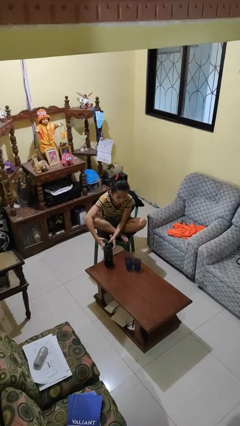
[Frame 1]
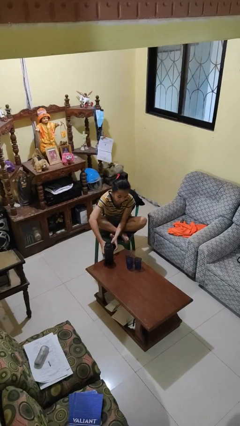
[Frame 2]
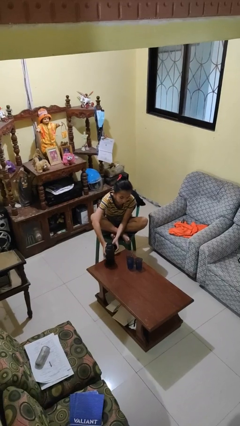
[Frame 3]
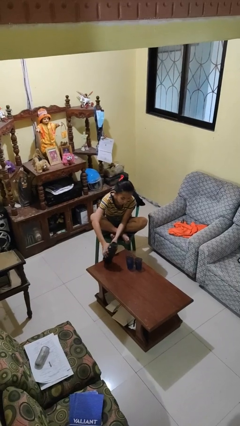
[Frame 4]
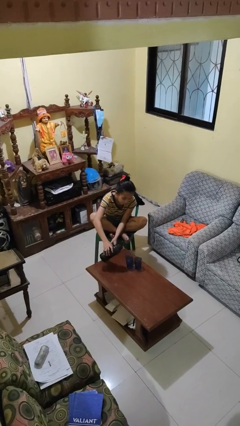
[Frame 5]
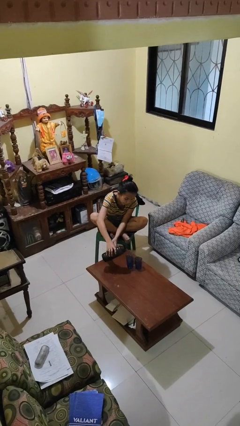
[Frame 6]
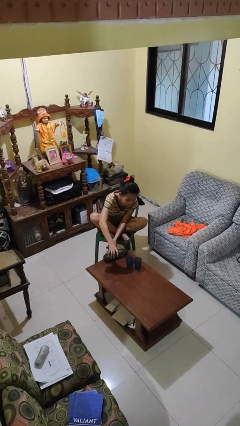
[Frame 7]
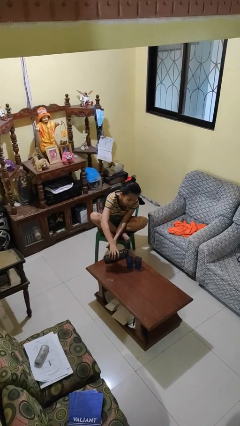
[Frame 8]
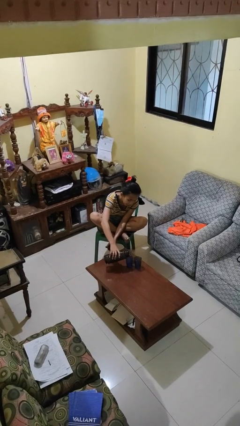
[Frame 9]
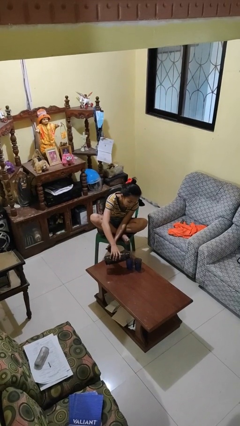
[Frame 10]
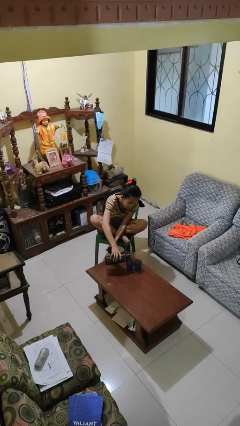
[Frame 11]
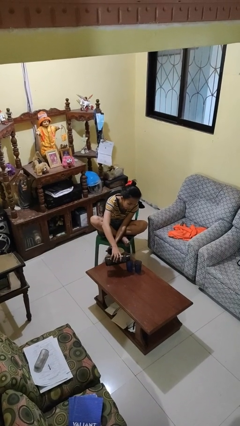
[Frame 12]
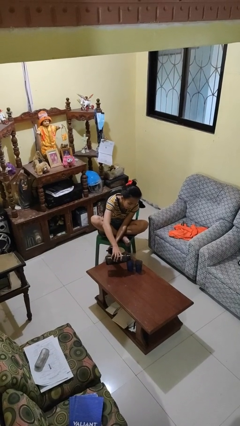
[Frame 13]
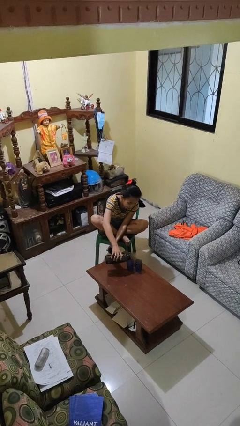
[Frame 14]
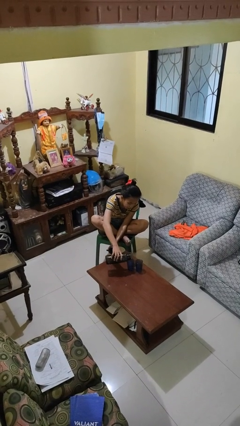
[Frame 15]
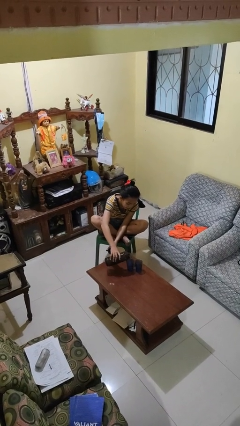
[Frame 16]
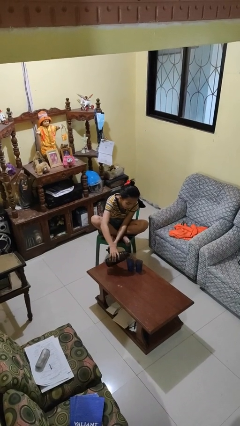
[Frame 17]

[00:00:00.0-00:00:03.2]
person pours liquid into cup

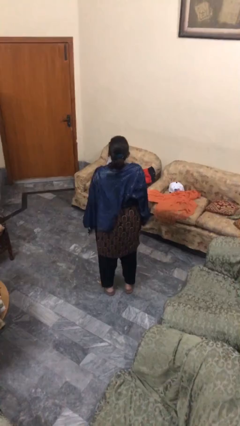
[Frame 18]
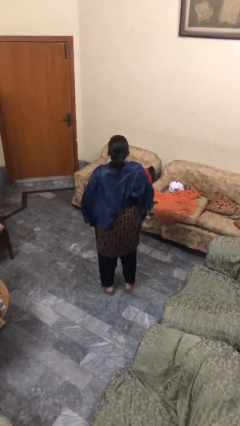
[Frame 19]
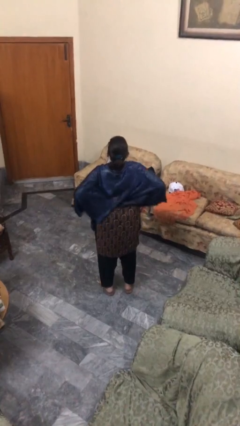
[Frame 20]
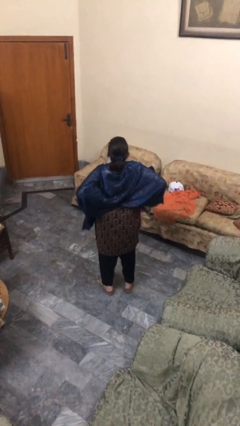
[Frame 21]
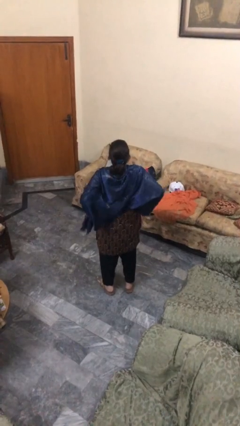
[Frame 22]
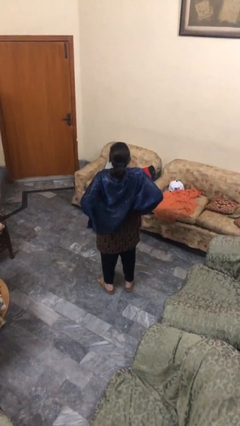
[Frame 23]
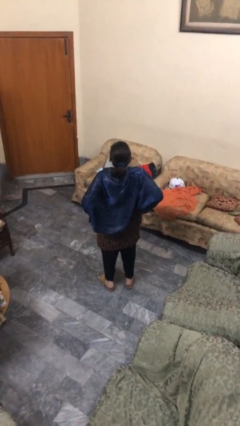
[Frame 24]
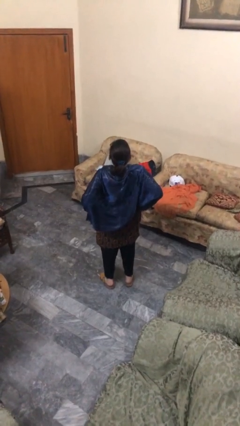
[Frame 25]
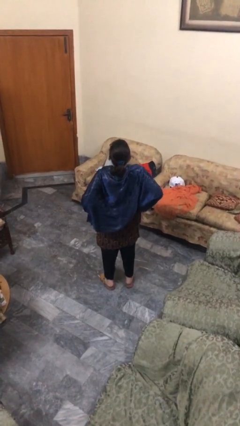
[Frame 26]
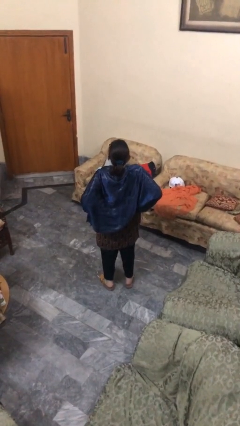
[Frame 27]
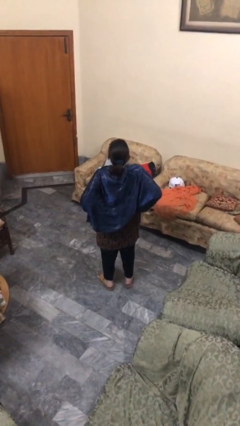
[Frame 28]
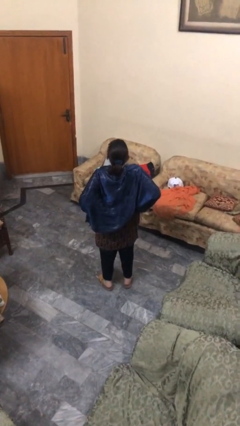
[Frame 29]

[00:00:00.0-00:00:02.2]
person stretches back

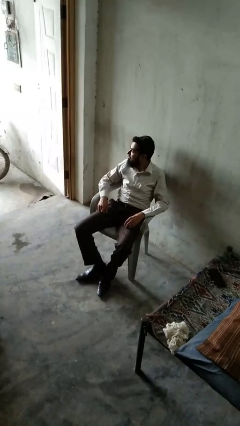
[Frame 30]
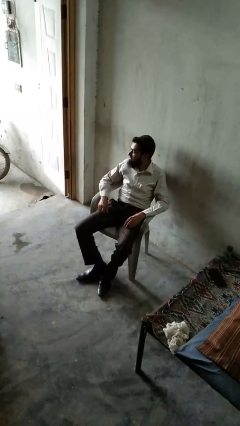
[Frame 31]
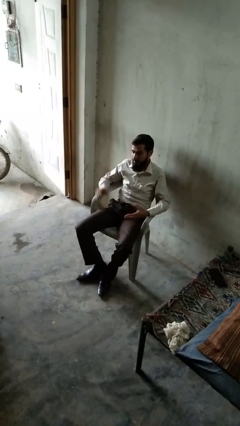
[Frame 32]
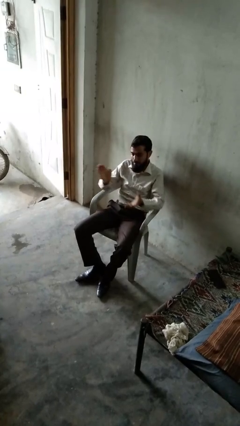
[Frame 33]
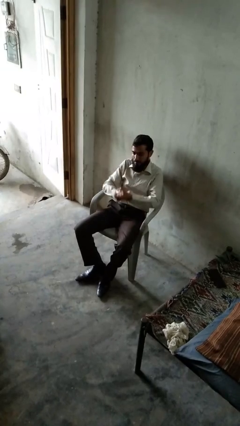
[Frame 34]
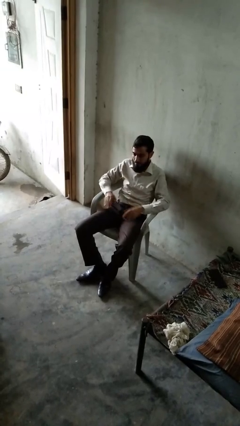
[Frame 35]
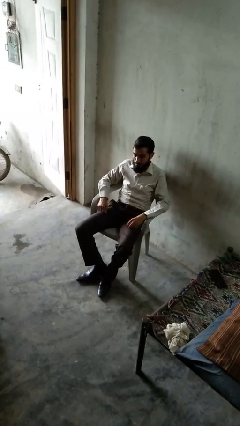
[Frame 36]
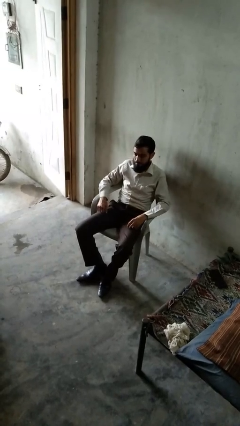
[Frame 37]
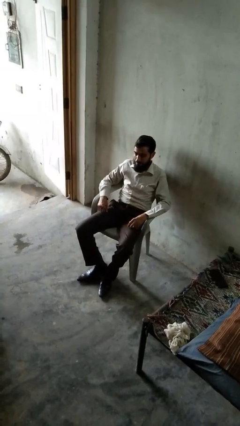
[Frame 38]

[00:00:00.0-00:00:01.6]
person claps hands

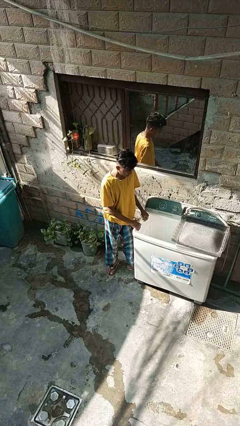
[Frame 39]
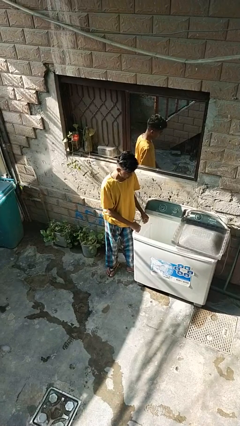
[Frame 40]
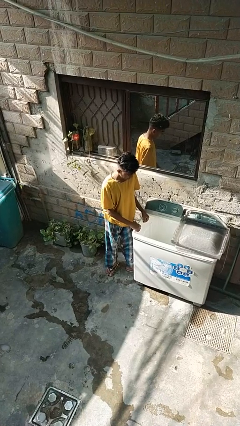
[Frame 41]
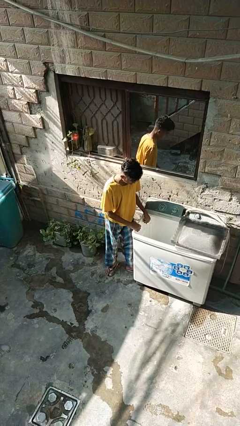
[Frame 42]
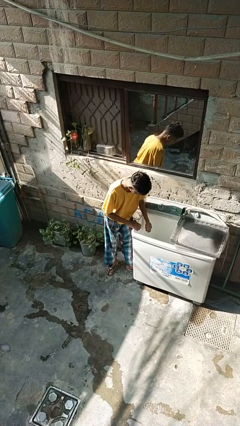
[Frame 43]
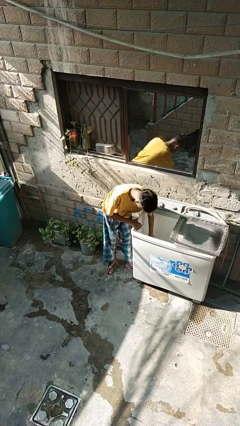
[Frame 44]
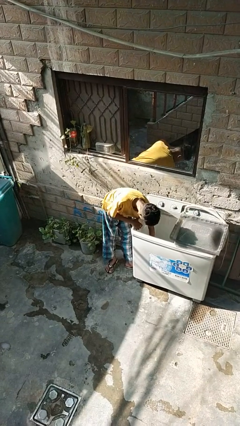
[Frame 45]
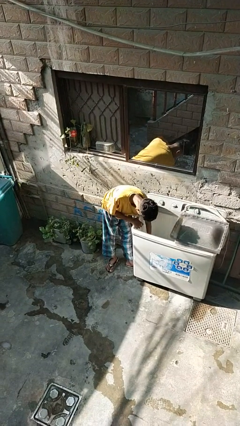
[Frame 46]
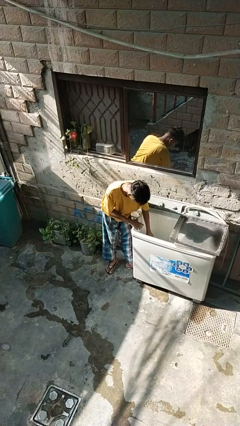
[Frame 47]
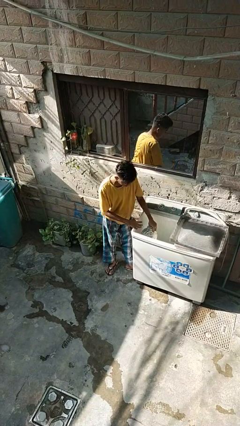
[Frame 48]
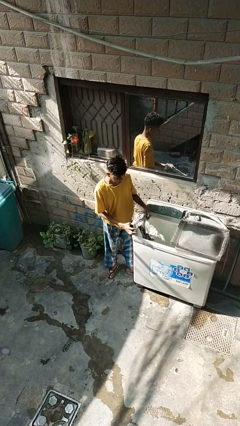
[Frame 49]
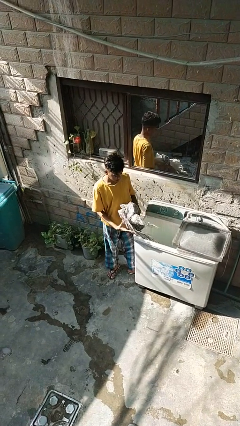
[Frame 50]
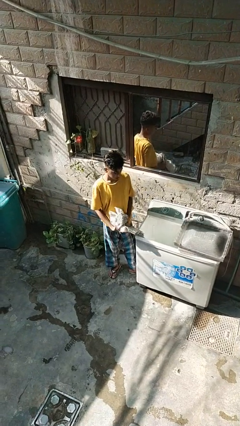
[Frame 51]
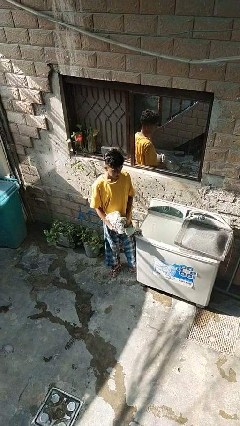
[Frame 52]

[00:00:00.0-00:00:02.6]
person unloads clotheswasher

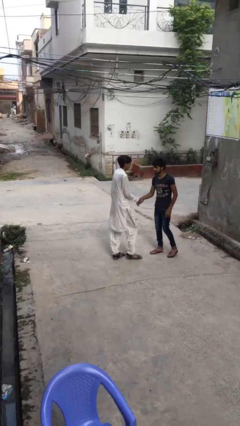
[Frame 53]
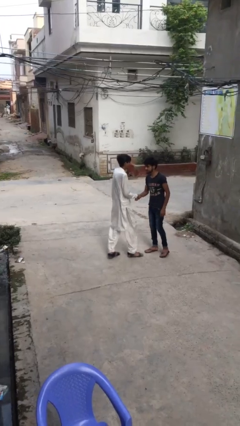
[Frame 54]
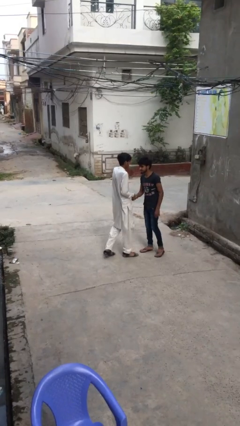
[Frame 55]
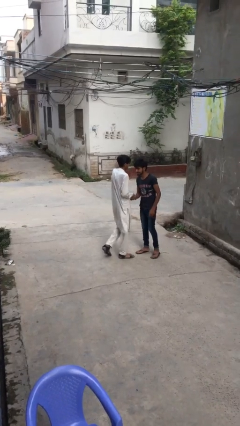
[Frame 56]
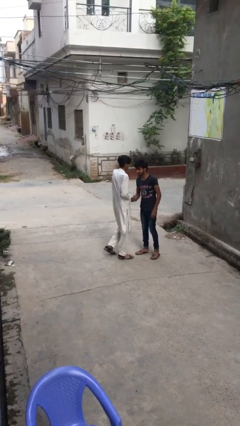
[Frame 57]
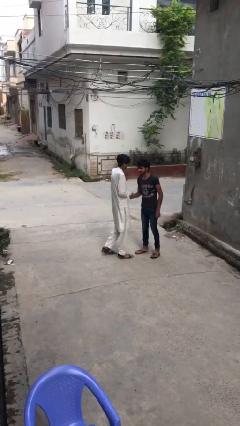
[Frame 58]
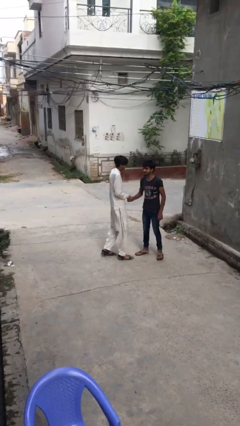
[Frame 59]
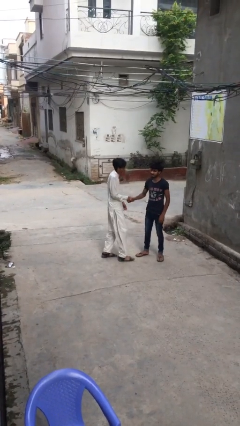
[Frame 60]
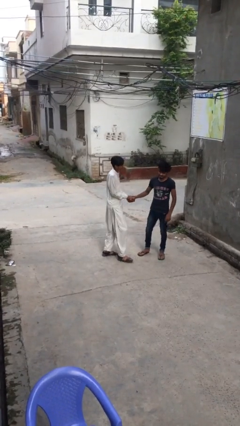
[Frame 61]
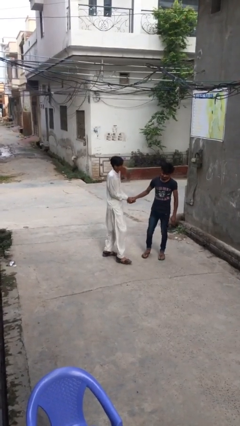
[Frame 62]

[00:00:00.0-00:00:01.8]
person shakes hand

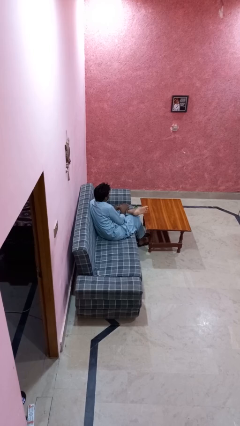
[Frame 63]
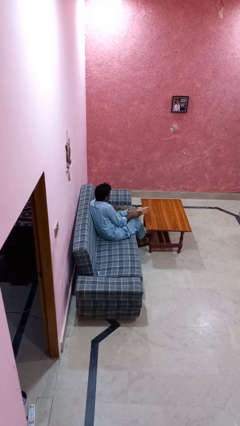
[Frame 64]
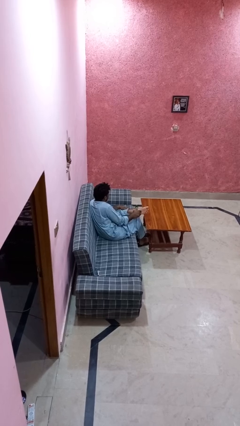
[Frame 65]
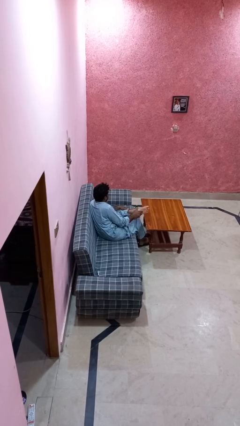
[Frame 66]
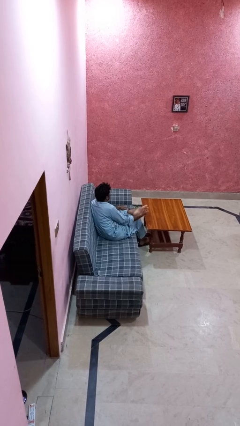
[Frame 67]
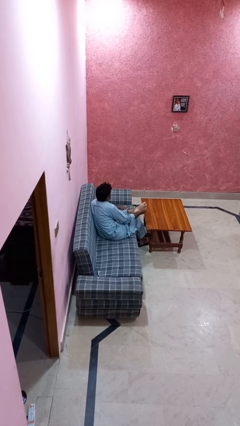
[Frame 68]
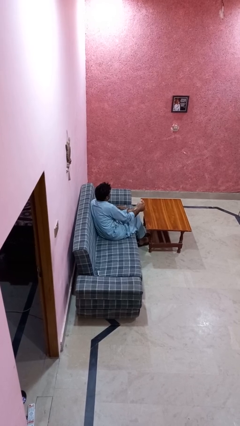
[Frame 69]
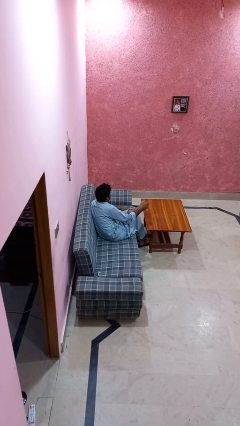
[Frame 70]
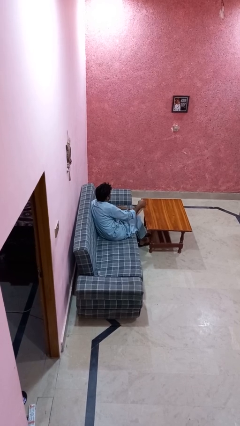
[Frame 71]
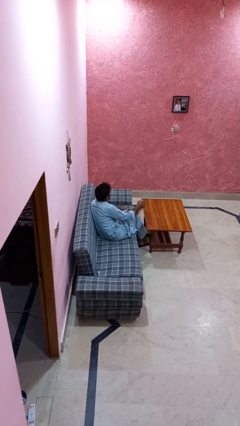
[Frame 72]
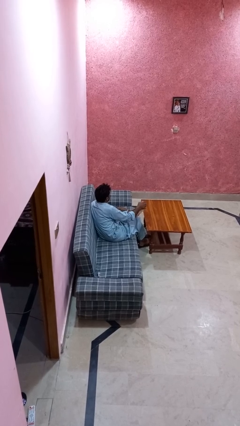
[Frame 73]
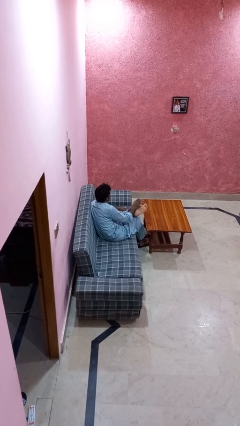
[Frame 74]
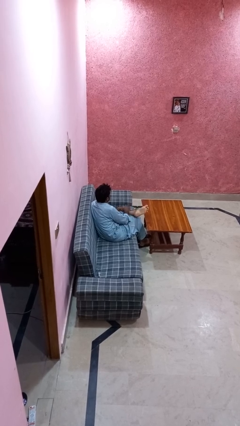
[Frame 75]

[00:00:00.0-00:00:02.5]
person rubs foot

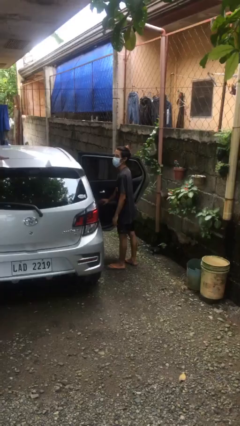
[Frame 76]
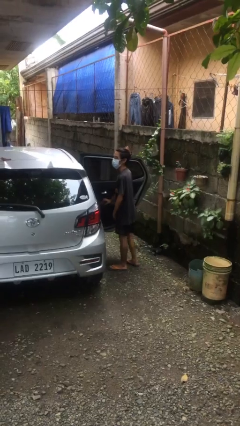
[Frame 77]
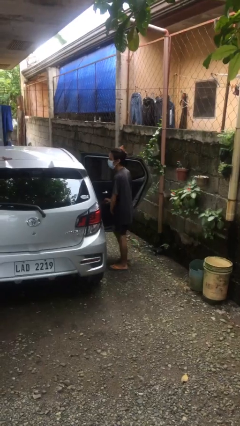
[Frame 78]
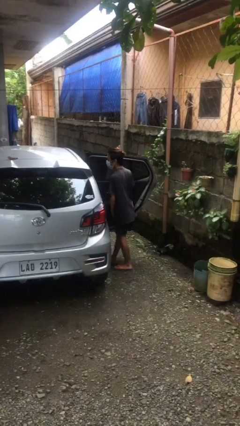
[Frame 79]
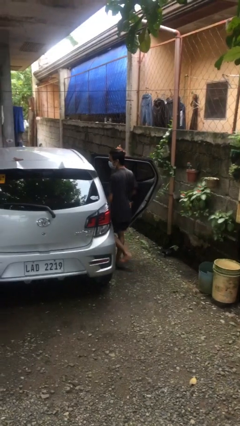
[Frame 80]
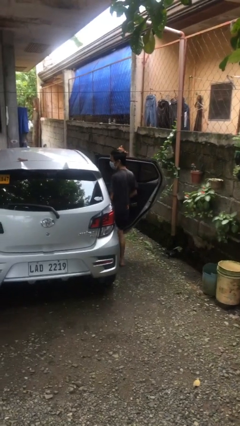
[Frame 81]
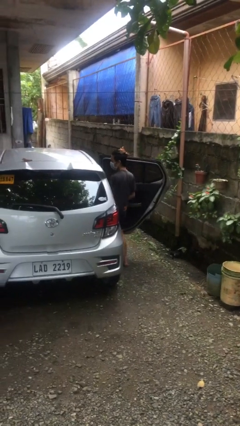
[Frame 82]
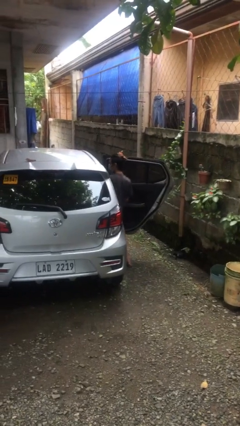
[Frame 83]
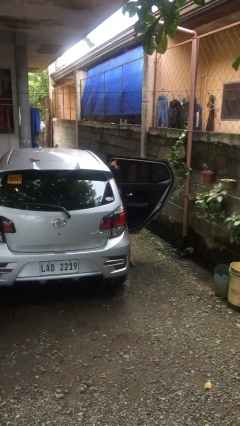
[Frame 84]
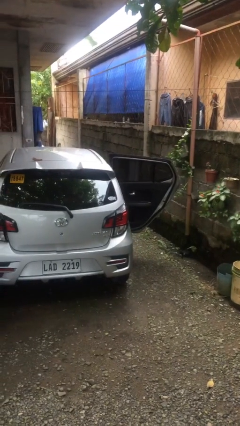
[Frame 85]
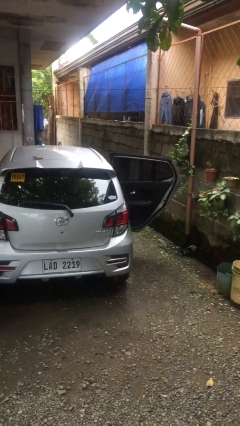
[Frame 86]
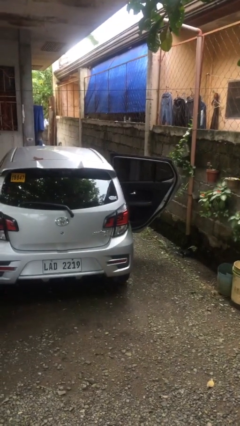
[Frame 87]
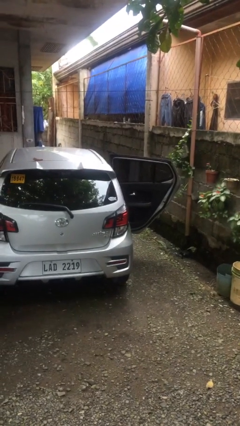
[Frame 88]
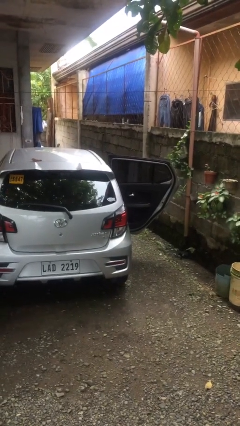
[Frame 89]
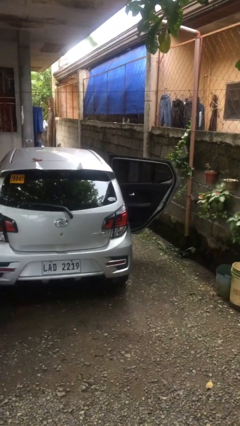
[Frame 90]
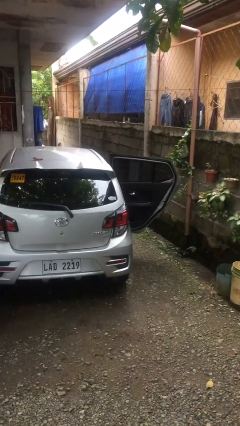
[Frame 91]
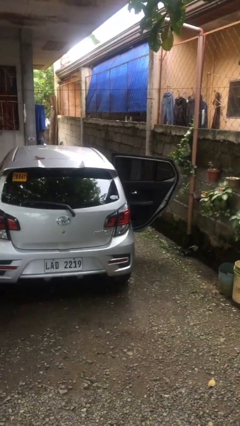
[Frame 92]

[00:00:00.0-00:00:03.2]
person enters car
